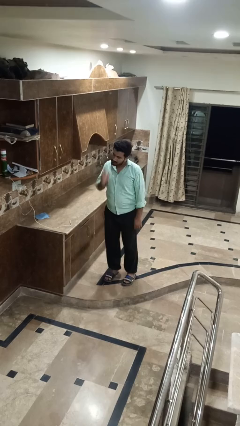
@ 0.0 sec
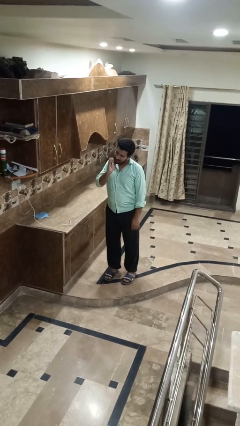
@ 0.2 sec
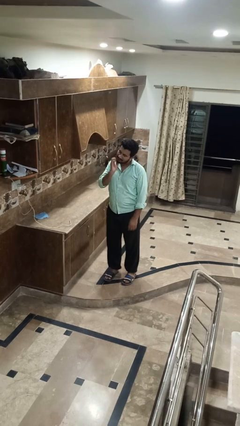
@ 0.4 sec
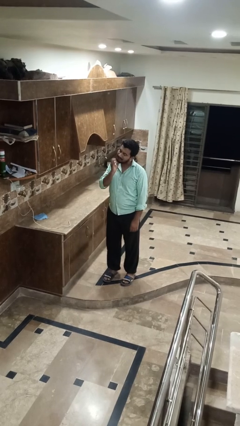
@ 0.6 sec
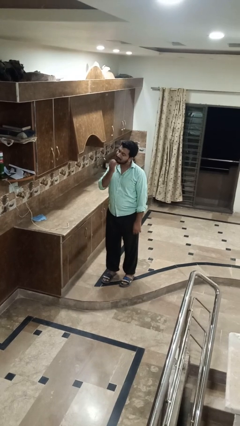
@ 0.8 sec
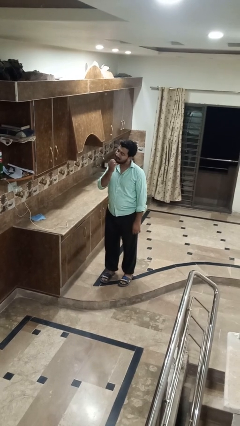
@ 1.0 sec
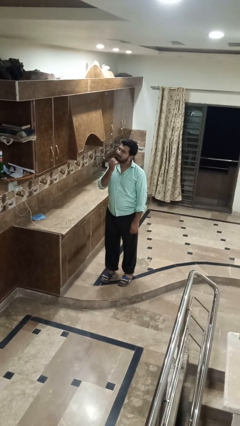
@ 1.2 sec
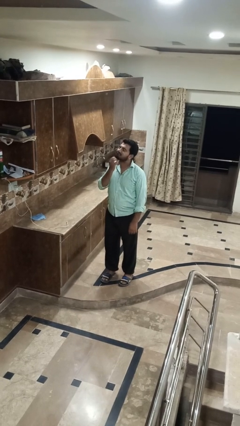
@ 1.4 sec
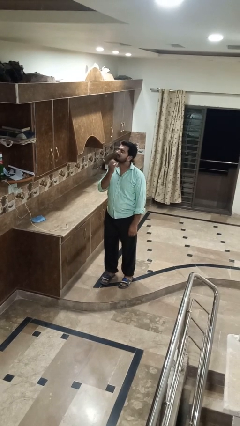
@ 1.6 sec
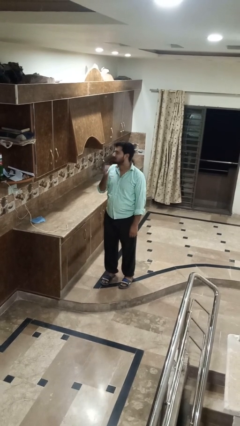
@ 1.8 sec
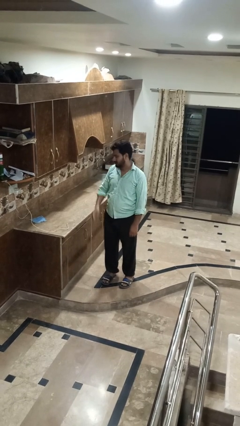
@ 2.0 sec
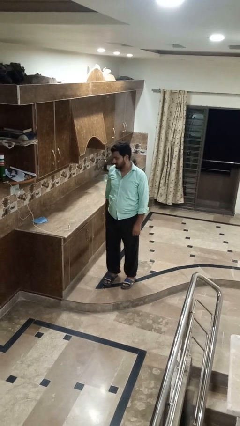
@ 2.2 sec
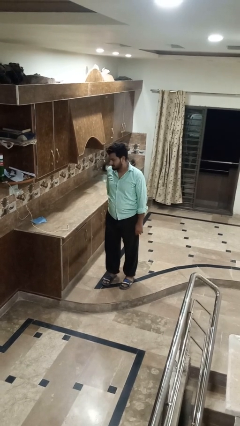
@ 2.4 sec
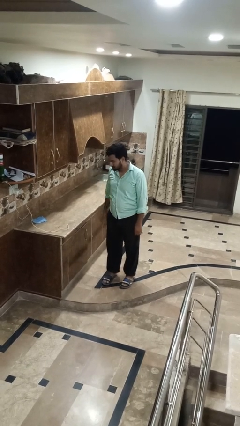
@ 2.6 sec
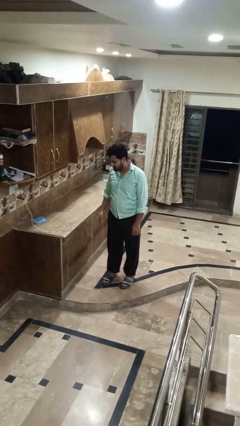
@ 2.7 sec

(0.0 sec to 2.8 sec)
person strokes chin

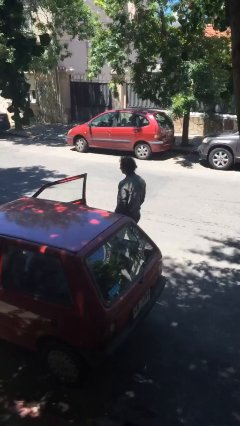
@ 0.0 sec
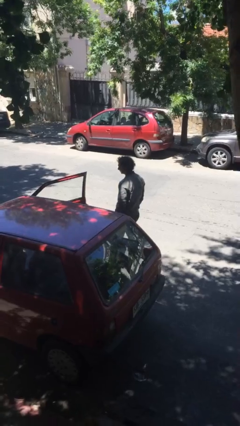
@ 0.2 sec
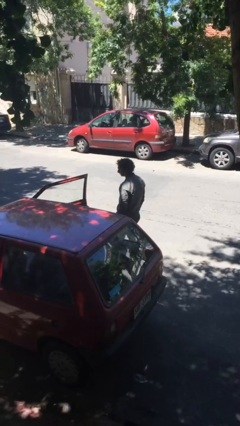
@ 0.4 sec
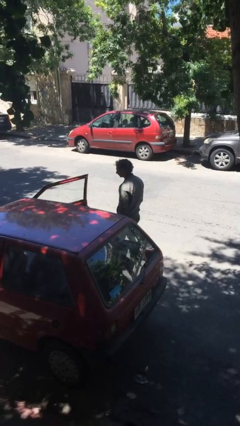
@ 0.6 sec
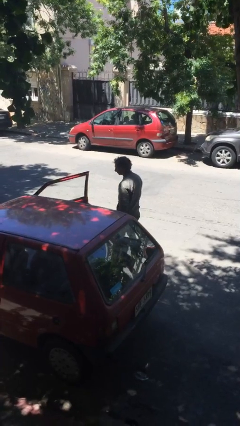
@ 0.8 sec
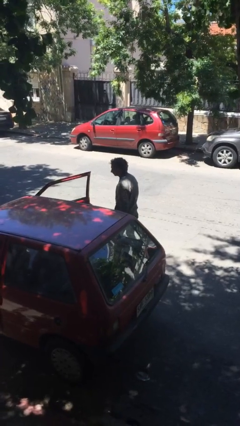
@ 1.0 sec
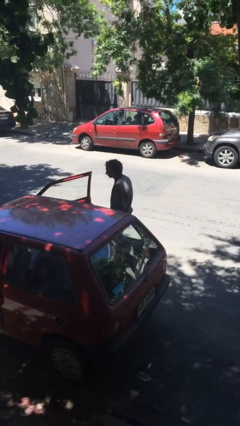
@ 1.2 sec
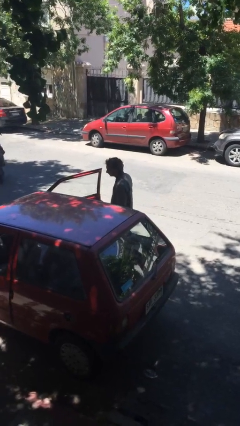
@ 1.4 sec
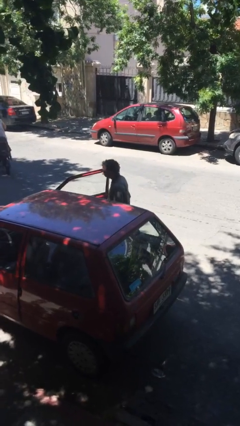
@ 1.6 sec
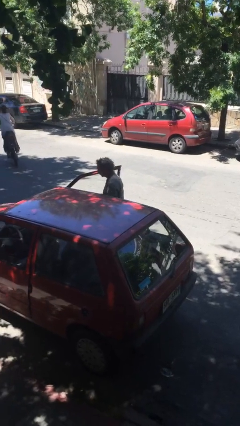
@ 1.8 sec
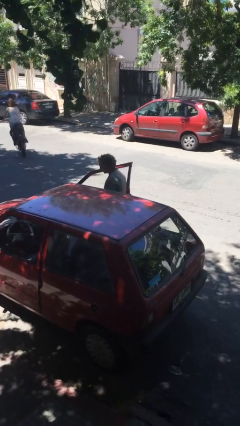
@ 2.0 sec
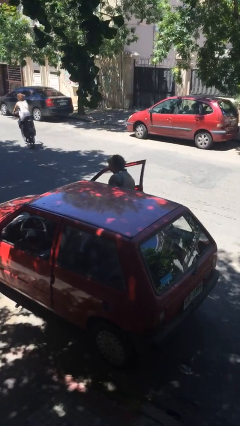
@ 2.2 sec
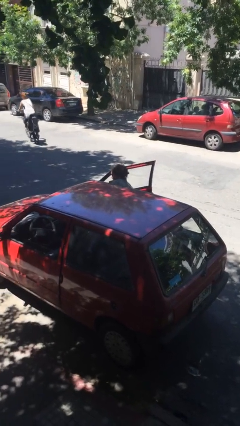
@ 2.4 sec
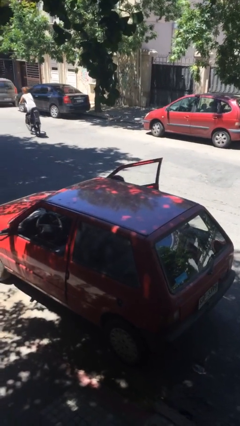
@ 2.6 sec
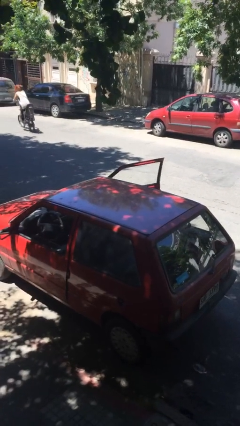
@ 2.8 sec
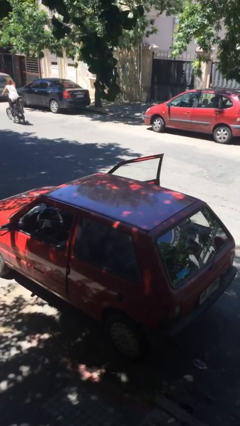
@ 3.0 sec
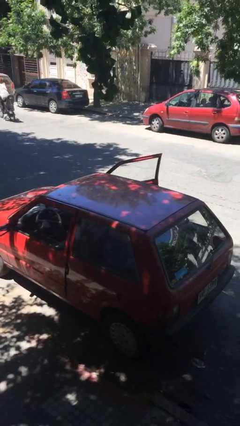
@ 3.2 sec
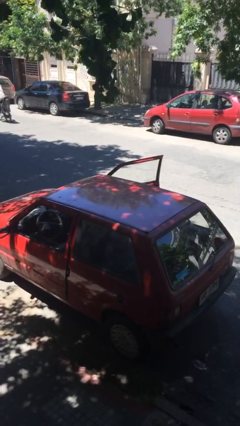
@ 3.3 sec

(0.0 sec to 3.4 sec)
person enters car

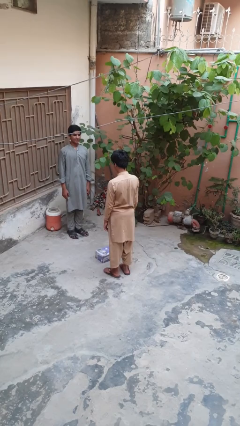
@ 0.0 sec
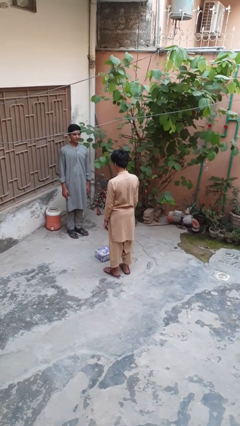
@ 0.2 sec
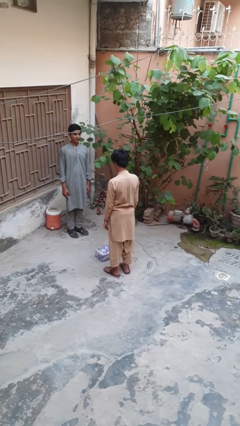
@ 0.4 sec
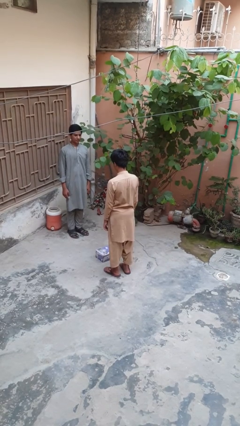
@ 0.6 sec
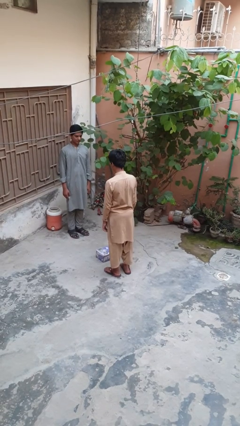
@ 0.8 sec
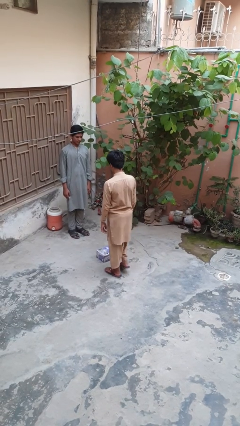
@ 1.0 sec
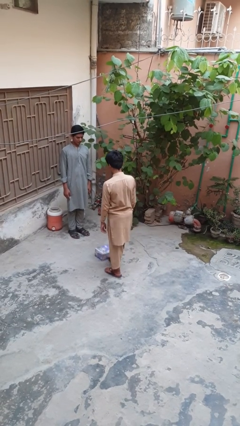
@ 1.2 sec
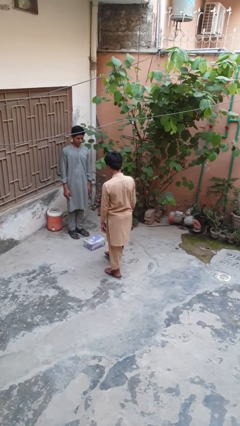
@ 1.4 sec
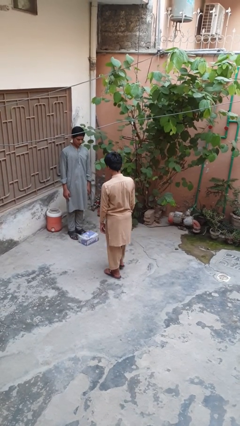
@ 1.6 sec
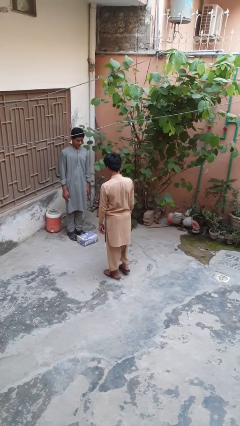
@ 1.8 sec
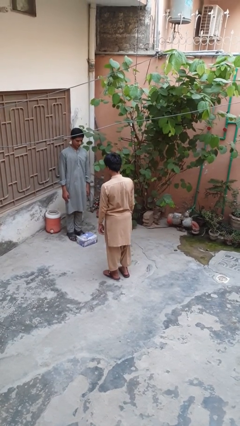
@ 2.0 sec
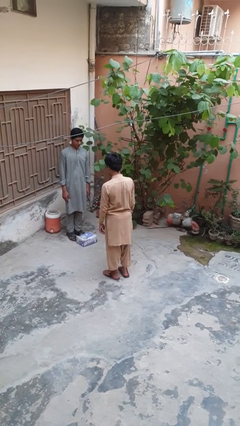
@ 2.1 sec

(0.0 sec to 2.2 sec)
person kicks object to person

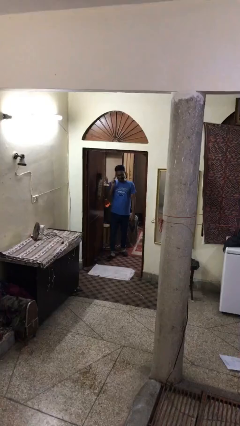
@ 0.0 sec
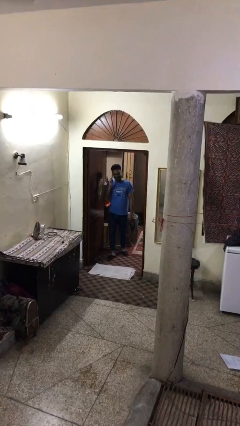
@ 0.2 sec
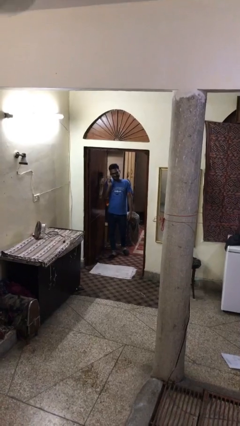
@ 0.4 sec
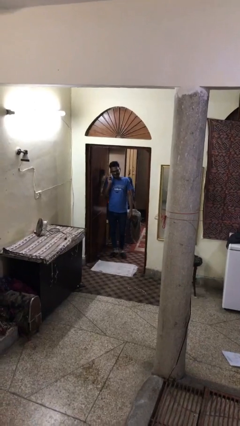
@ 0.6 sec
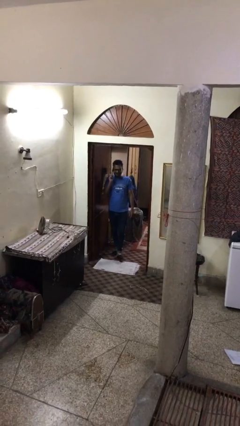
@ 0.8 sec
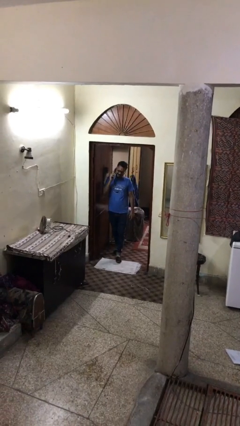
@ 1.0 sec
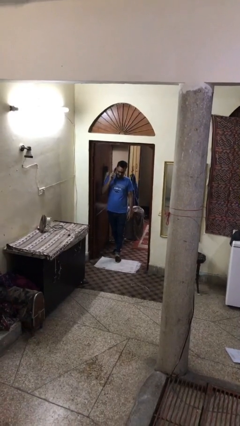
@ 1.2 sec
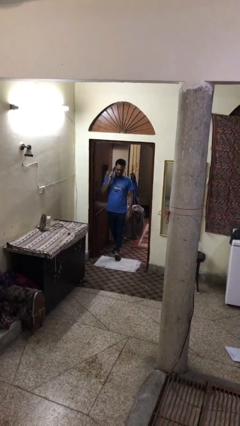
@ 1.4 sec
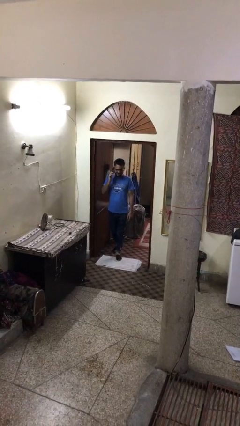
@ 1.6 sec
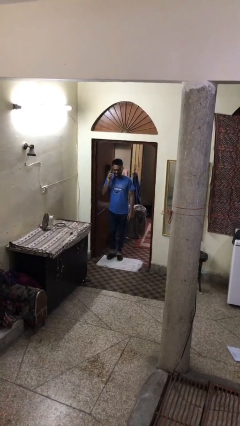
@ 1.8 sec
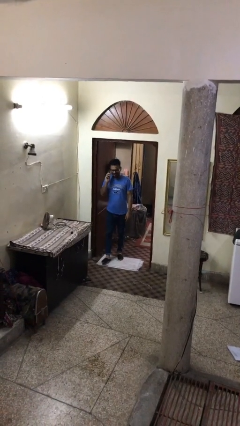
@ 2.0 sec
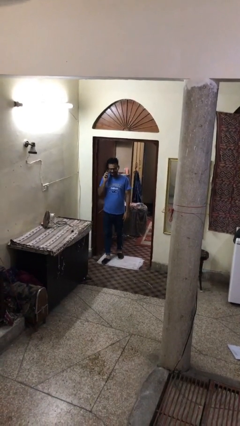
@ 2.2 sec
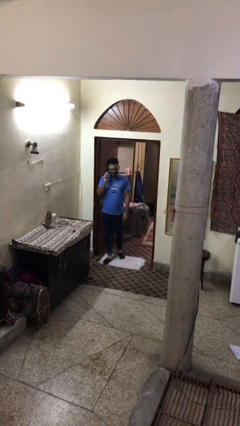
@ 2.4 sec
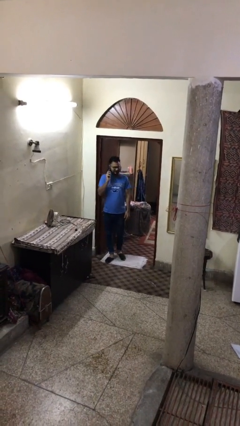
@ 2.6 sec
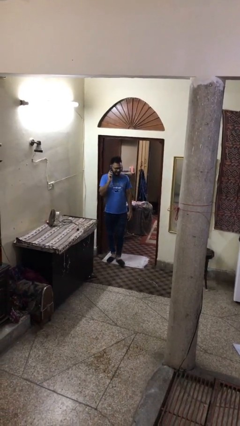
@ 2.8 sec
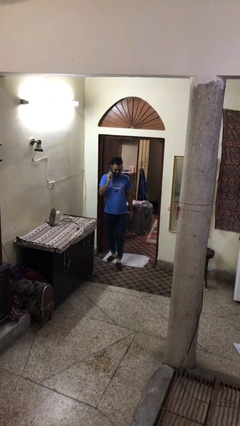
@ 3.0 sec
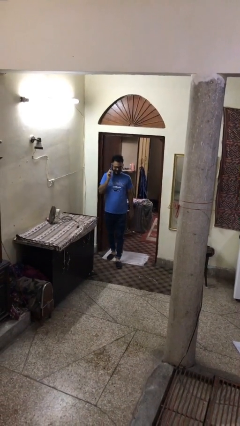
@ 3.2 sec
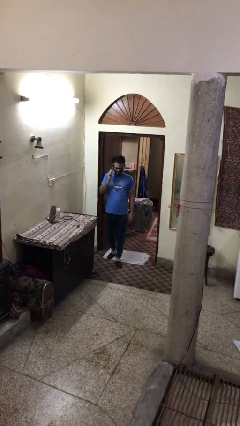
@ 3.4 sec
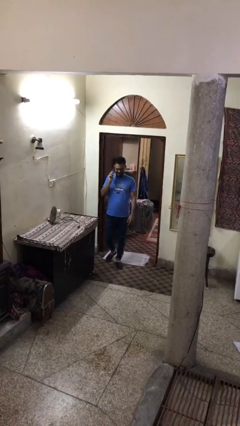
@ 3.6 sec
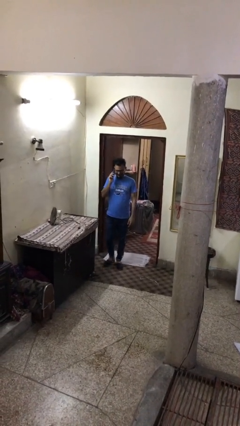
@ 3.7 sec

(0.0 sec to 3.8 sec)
person enters scene through structure

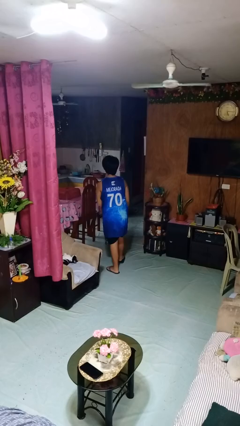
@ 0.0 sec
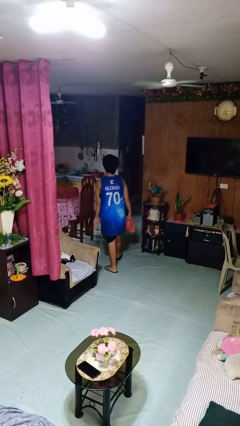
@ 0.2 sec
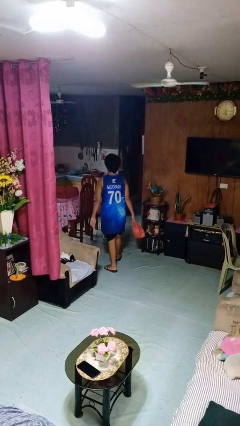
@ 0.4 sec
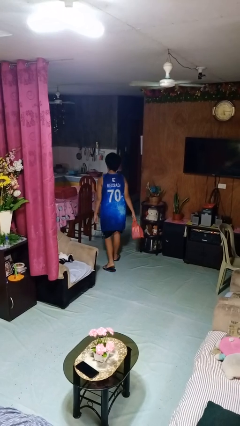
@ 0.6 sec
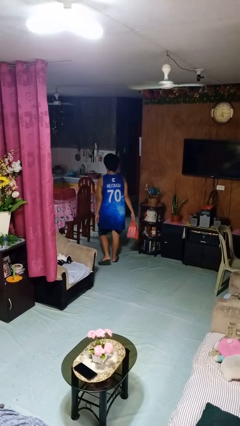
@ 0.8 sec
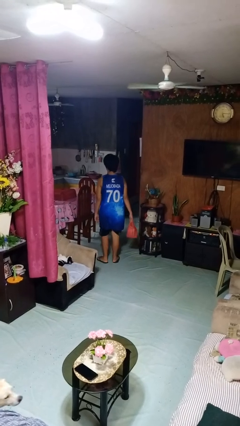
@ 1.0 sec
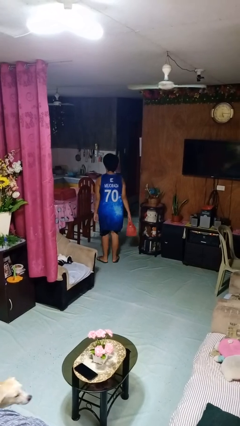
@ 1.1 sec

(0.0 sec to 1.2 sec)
person carries groceries

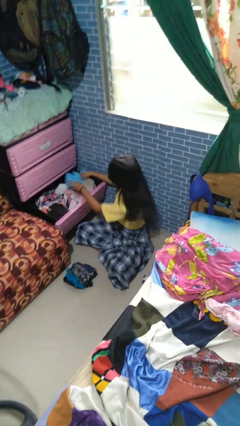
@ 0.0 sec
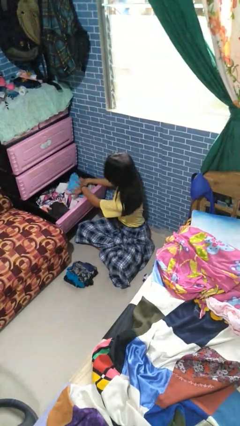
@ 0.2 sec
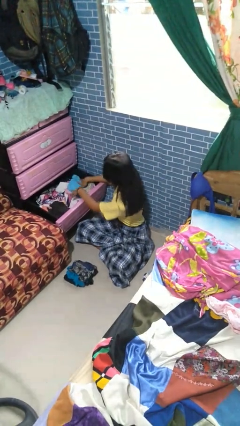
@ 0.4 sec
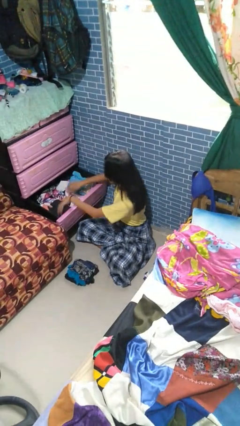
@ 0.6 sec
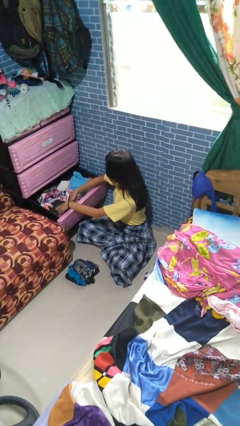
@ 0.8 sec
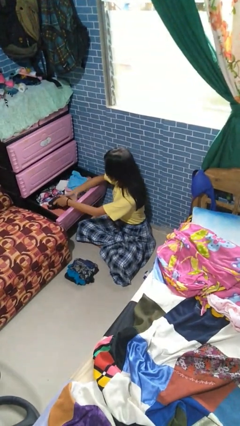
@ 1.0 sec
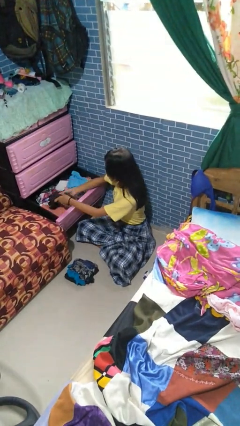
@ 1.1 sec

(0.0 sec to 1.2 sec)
person puts clothes into dresser

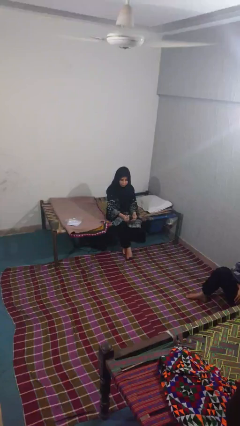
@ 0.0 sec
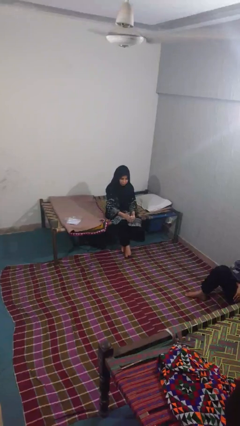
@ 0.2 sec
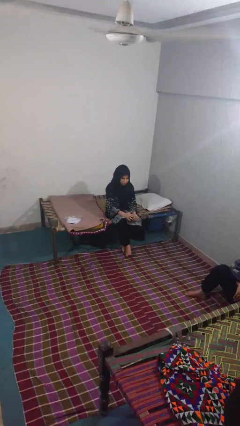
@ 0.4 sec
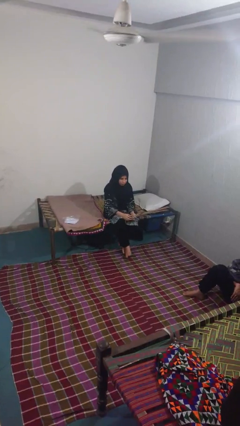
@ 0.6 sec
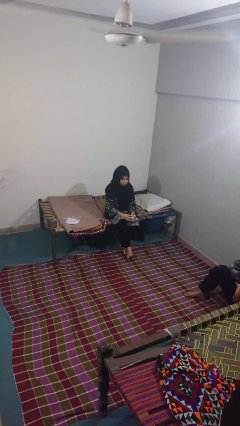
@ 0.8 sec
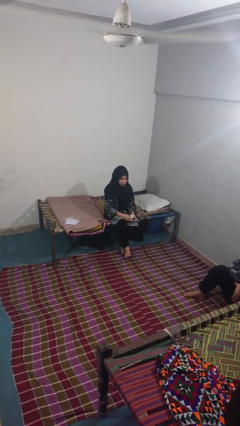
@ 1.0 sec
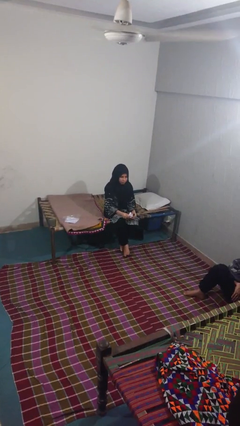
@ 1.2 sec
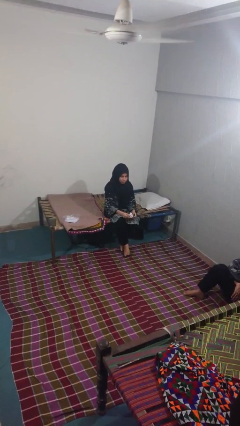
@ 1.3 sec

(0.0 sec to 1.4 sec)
person crumples paper

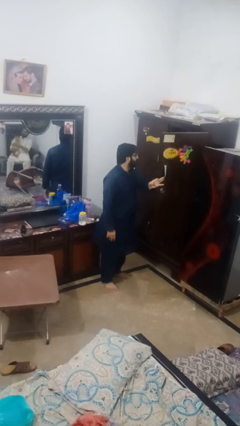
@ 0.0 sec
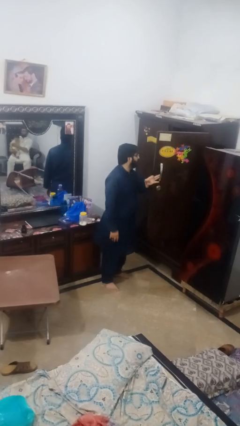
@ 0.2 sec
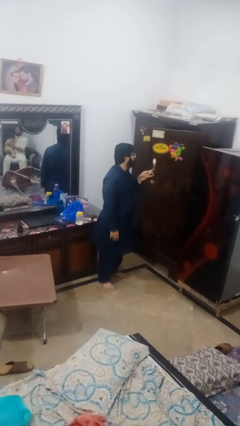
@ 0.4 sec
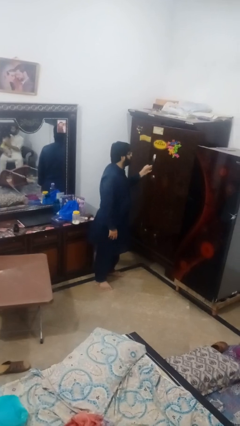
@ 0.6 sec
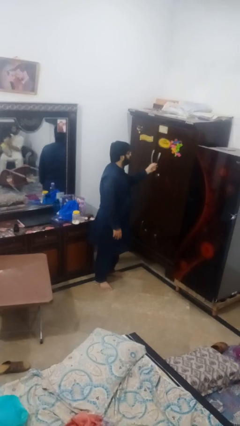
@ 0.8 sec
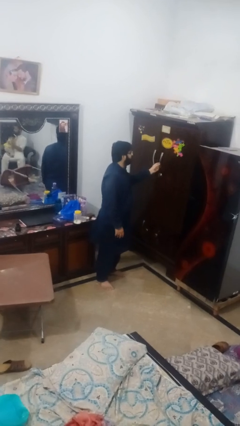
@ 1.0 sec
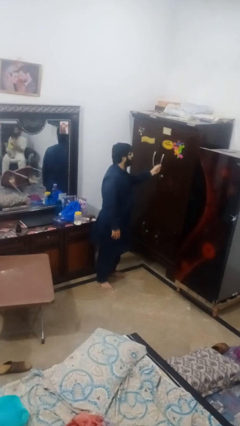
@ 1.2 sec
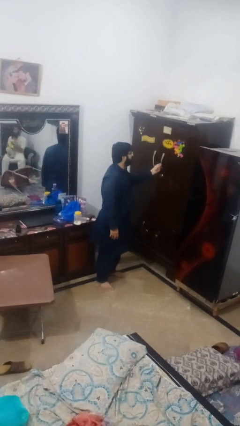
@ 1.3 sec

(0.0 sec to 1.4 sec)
person closes closet door
